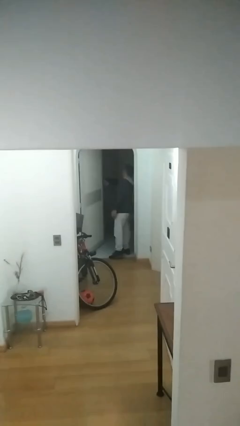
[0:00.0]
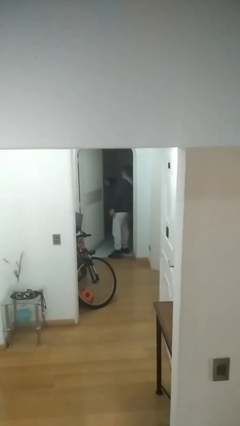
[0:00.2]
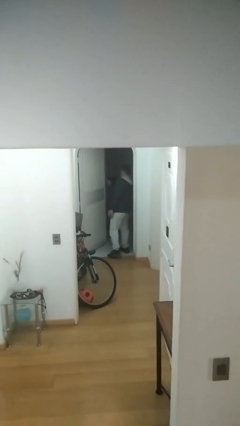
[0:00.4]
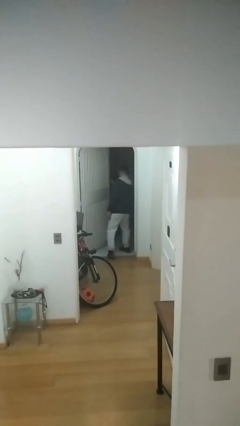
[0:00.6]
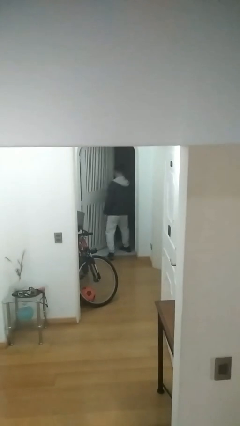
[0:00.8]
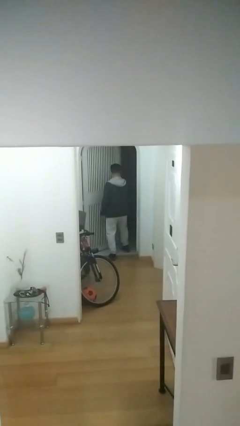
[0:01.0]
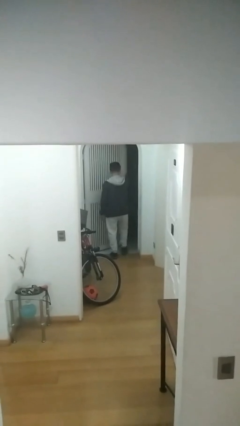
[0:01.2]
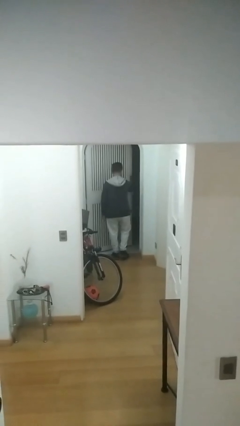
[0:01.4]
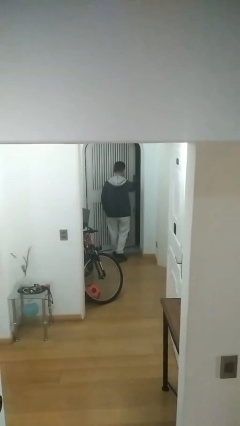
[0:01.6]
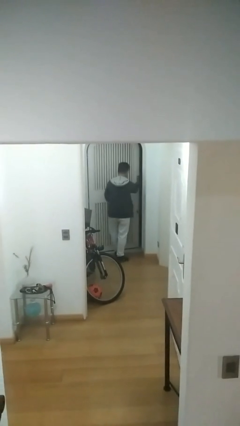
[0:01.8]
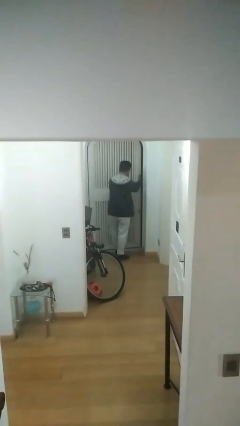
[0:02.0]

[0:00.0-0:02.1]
person closes facility door

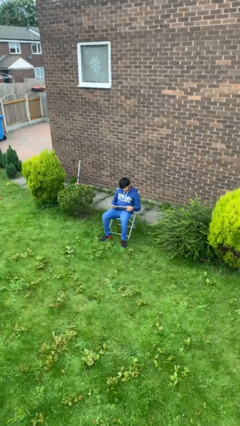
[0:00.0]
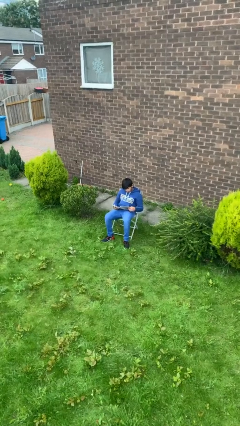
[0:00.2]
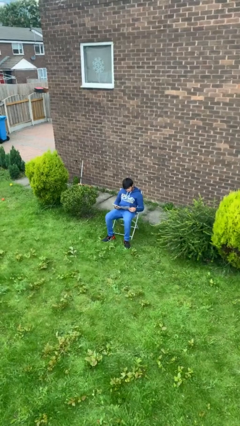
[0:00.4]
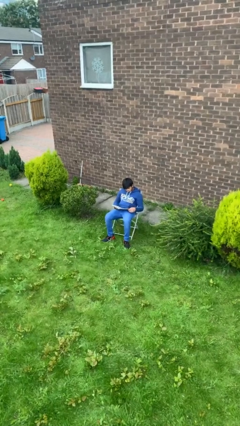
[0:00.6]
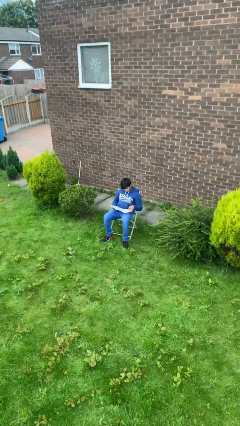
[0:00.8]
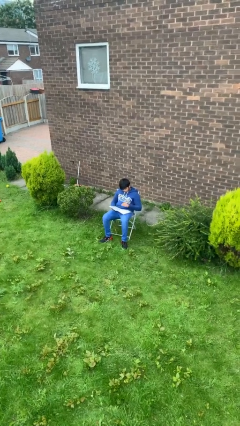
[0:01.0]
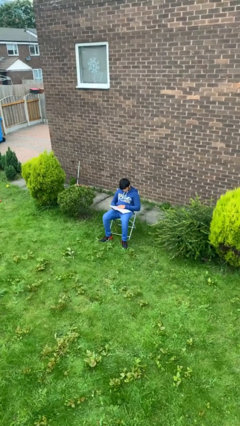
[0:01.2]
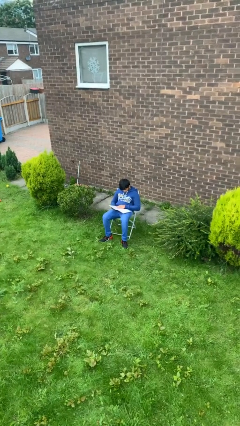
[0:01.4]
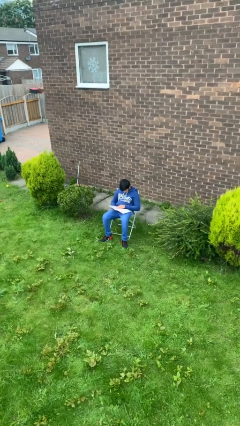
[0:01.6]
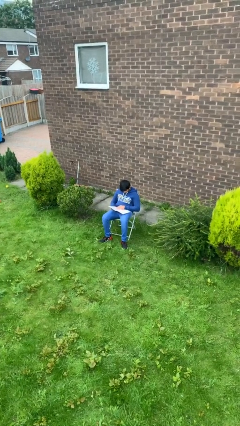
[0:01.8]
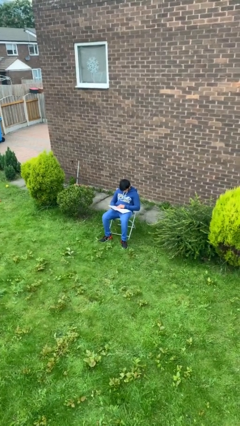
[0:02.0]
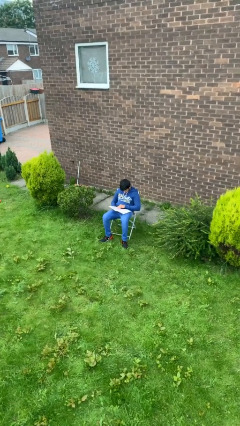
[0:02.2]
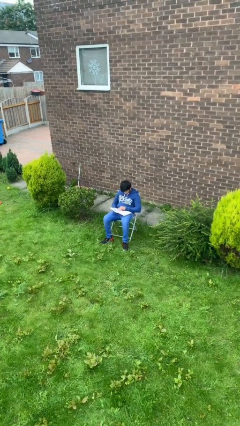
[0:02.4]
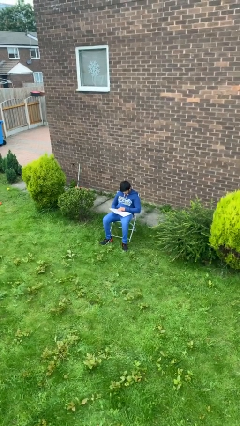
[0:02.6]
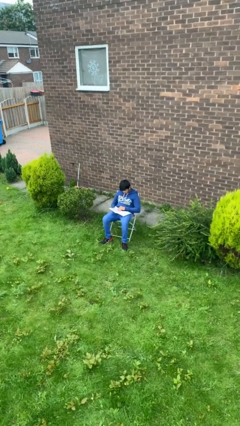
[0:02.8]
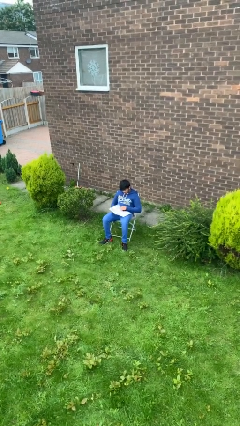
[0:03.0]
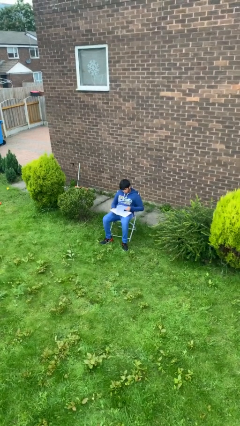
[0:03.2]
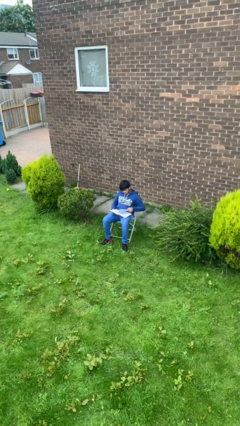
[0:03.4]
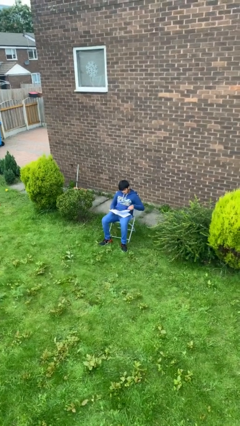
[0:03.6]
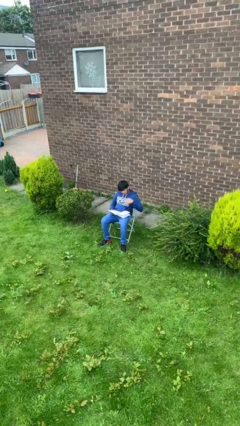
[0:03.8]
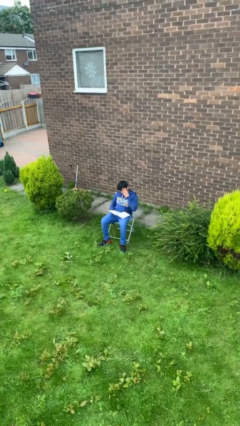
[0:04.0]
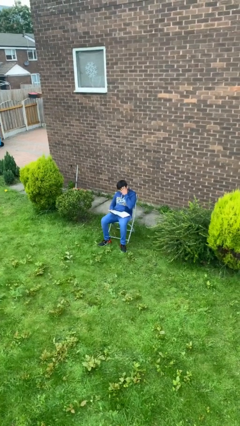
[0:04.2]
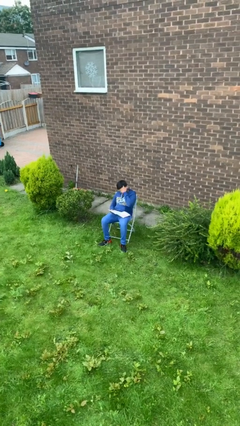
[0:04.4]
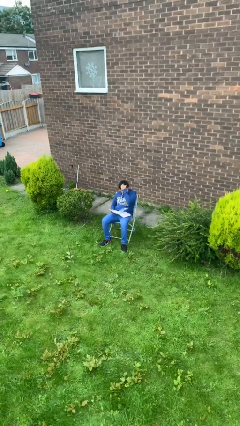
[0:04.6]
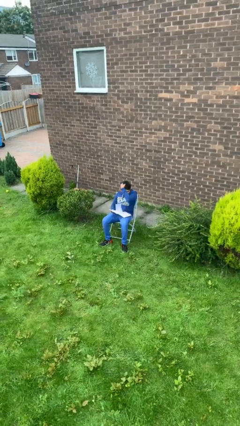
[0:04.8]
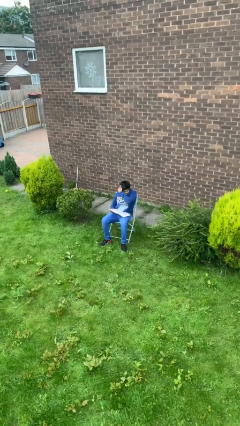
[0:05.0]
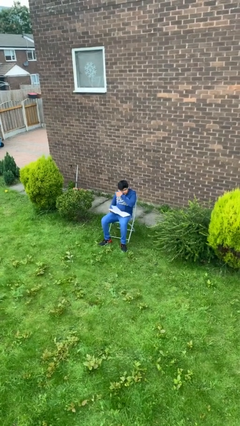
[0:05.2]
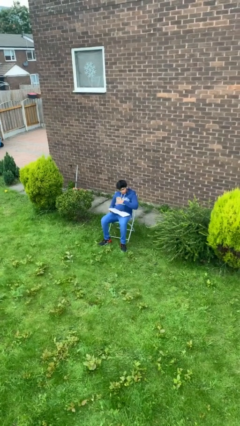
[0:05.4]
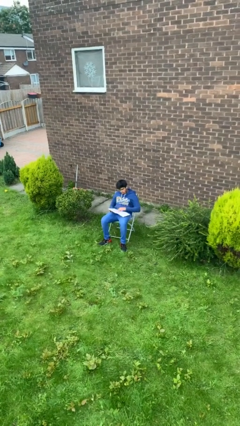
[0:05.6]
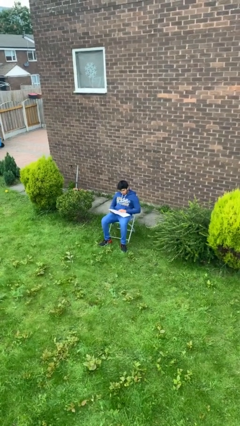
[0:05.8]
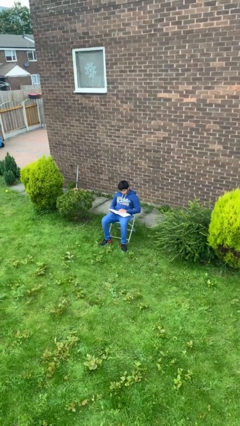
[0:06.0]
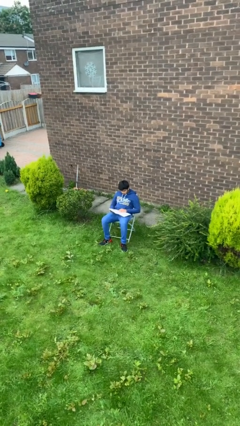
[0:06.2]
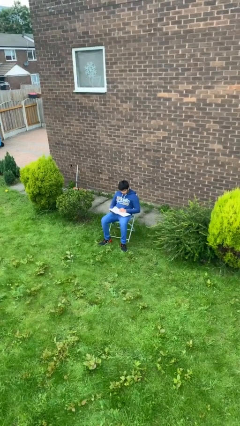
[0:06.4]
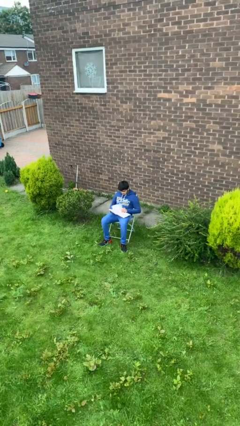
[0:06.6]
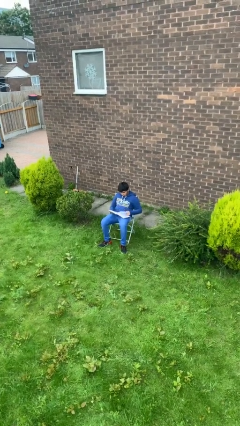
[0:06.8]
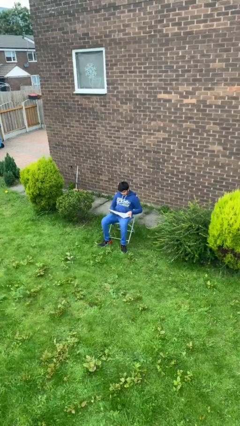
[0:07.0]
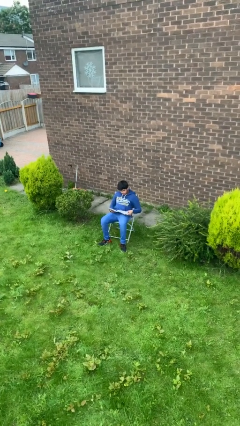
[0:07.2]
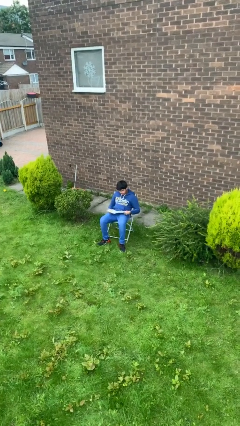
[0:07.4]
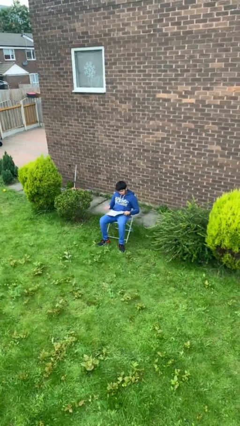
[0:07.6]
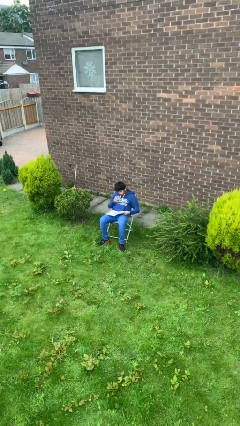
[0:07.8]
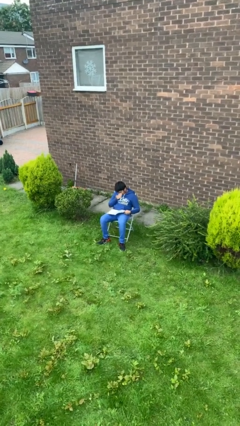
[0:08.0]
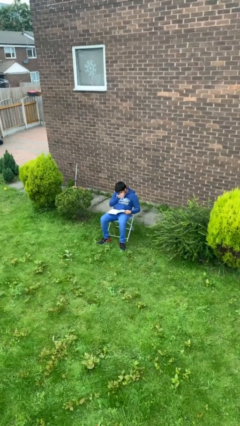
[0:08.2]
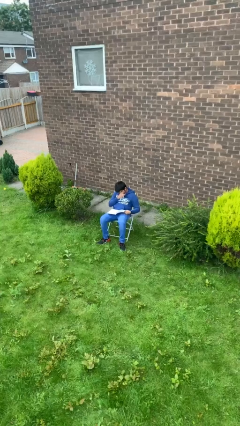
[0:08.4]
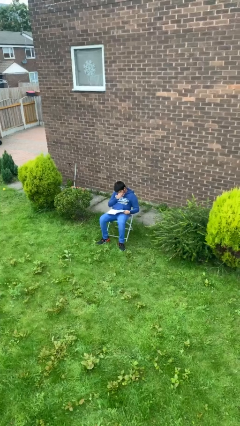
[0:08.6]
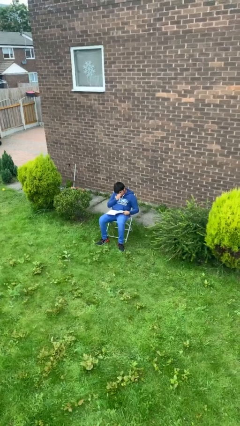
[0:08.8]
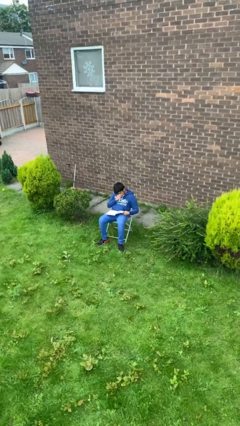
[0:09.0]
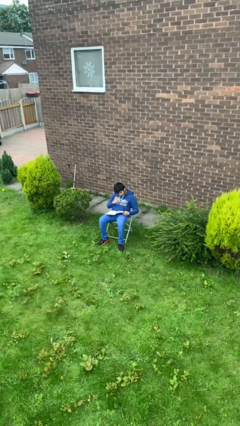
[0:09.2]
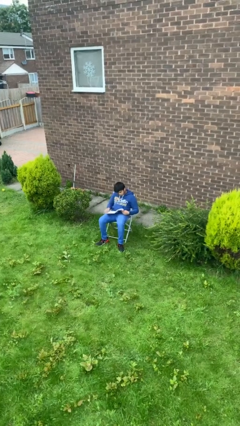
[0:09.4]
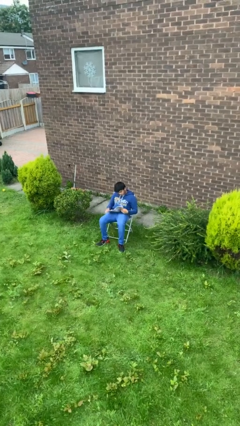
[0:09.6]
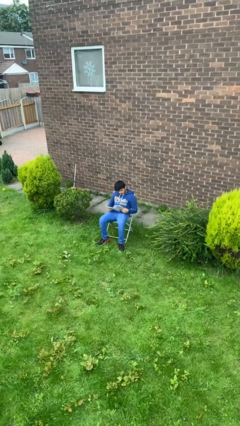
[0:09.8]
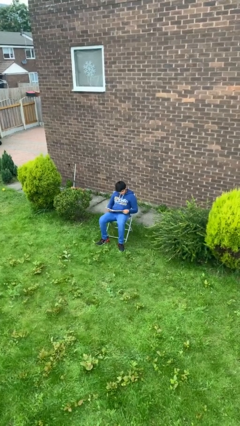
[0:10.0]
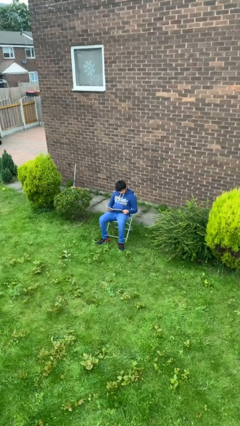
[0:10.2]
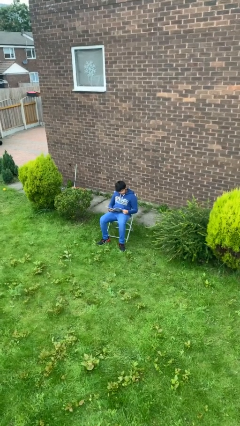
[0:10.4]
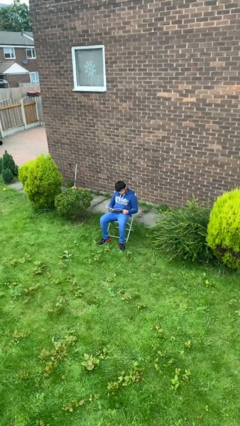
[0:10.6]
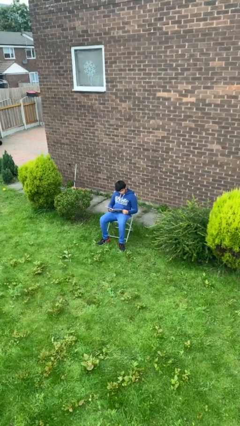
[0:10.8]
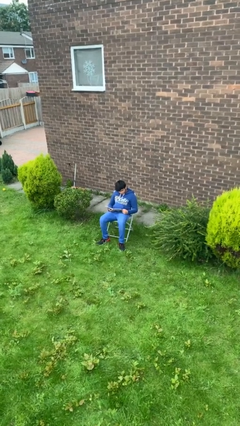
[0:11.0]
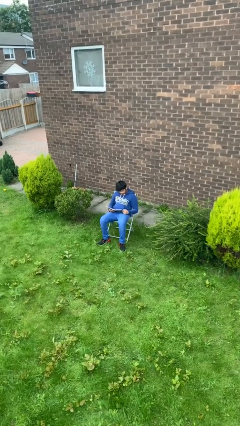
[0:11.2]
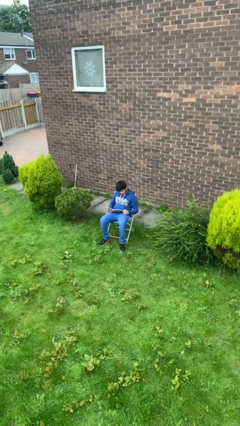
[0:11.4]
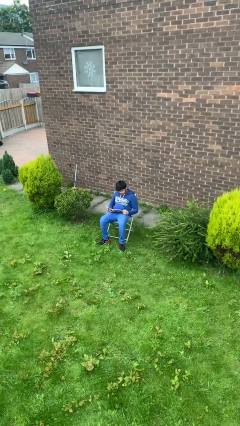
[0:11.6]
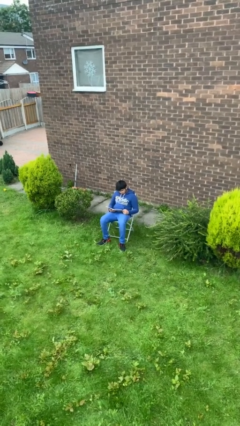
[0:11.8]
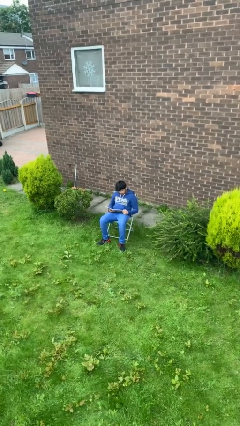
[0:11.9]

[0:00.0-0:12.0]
person reads document

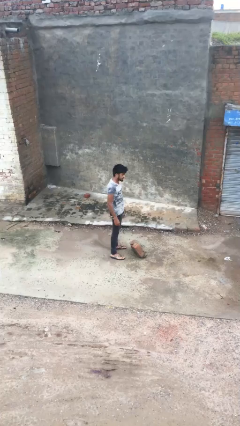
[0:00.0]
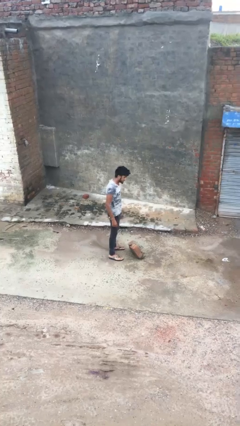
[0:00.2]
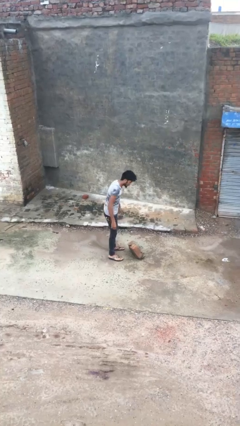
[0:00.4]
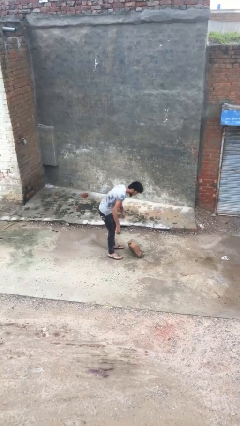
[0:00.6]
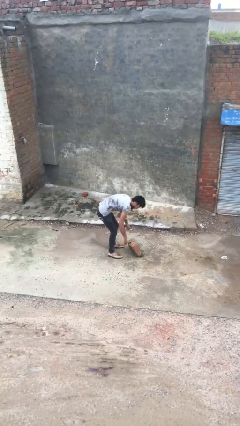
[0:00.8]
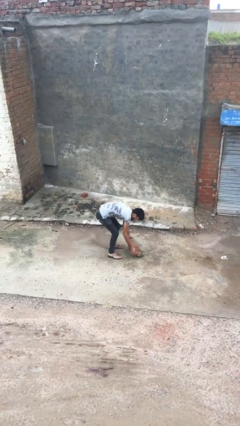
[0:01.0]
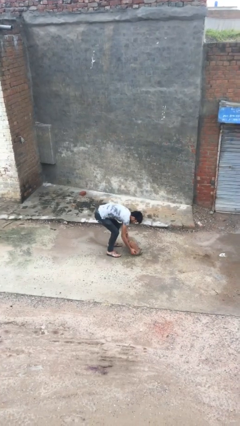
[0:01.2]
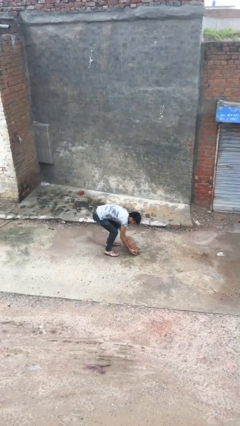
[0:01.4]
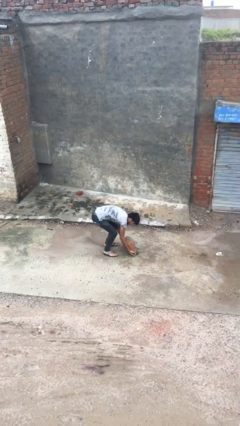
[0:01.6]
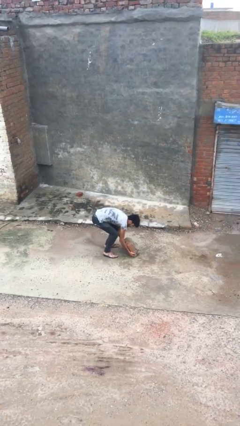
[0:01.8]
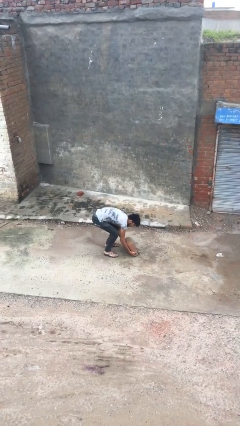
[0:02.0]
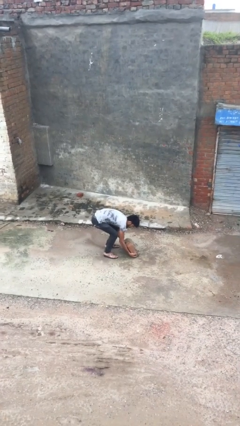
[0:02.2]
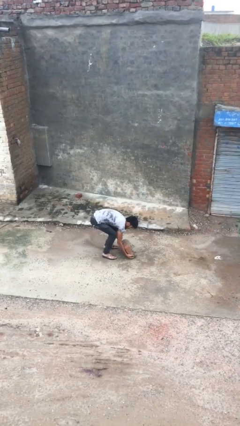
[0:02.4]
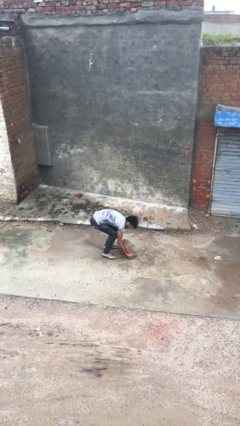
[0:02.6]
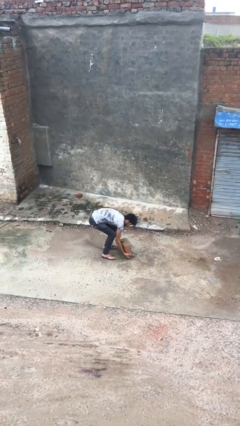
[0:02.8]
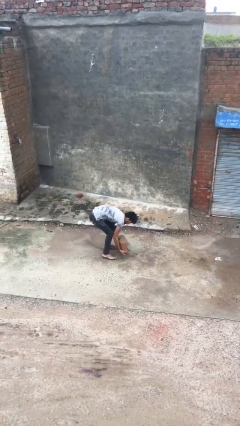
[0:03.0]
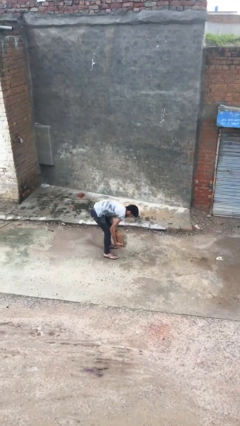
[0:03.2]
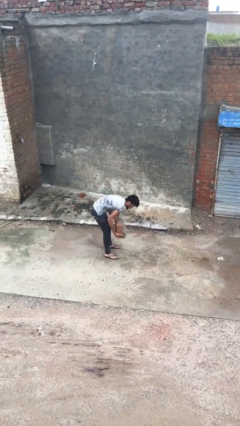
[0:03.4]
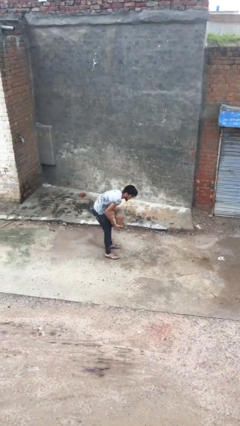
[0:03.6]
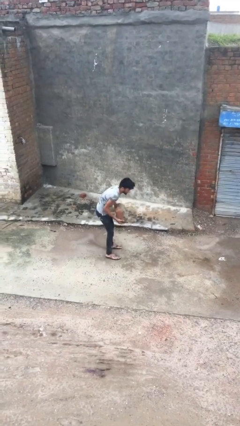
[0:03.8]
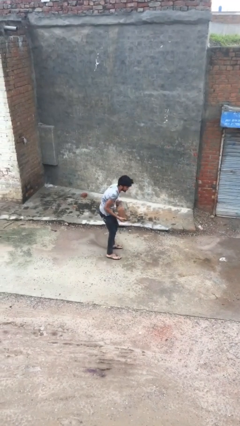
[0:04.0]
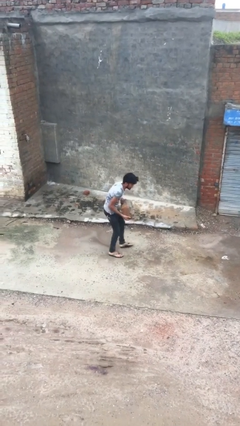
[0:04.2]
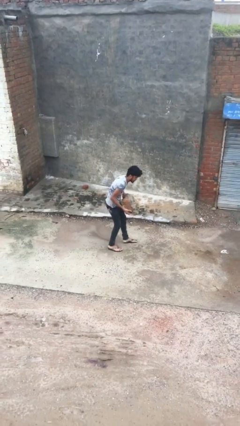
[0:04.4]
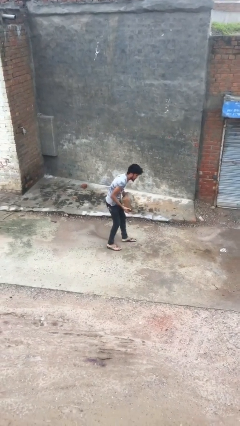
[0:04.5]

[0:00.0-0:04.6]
person picks up object from floor
